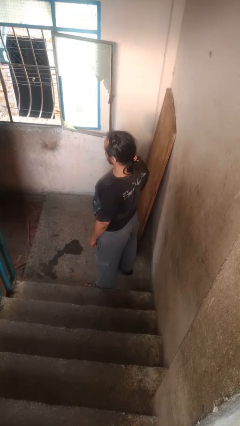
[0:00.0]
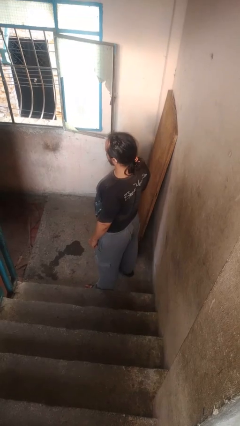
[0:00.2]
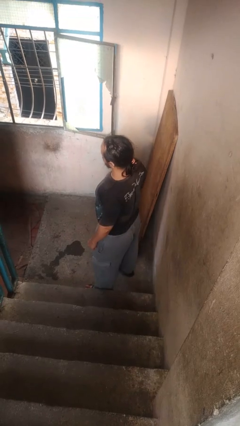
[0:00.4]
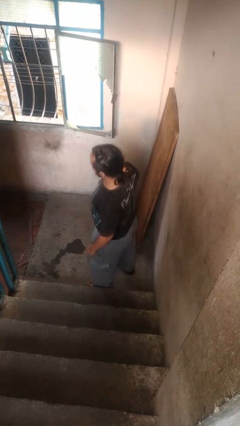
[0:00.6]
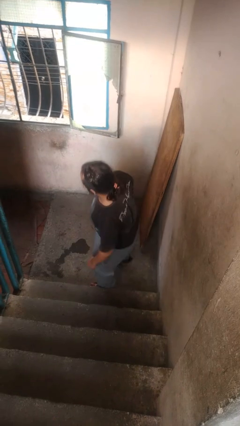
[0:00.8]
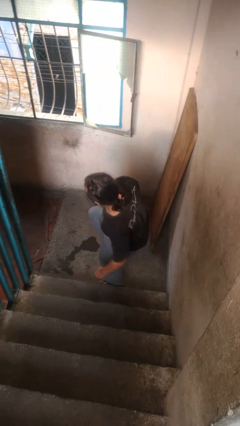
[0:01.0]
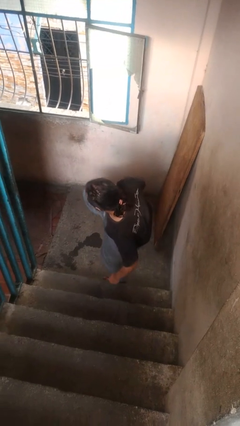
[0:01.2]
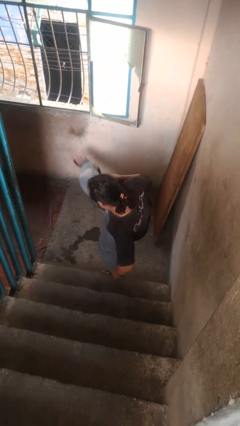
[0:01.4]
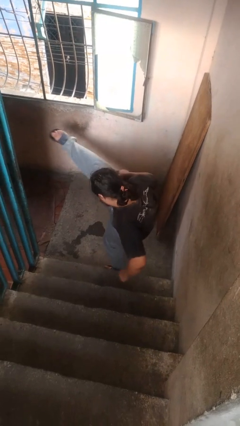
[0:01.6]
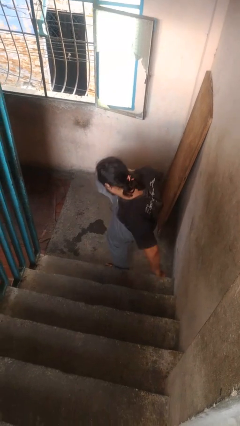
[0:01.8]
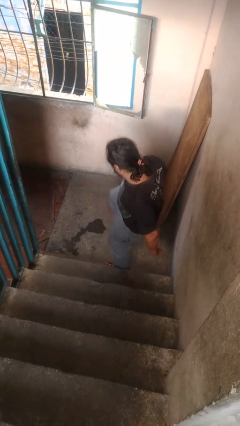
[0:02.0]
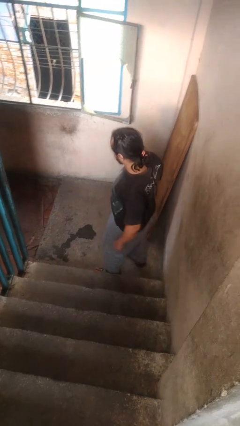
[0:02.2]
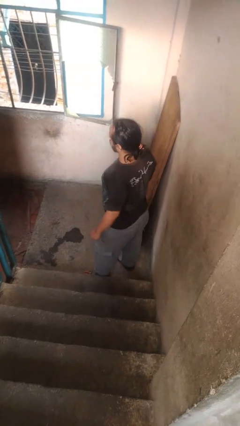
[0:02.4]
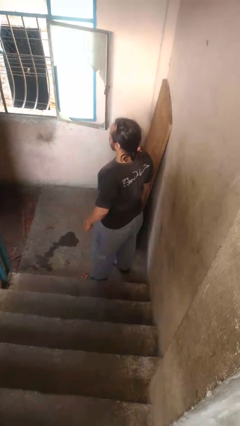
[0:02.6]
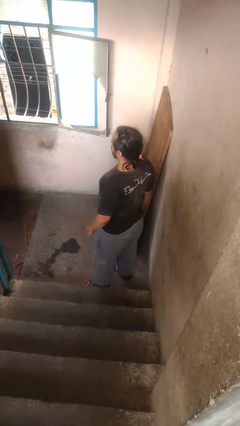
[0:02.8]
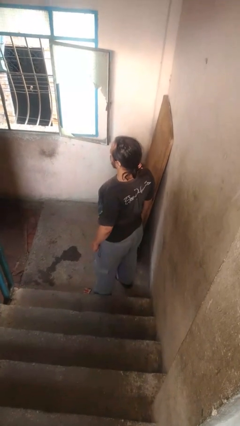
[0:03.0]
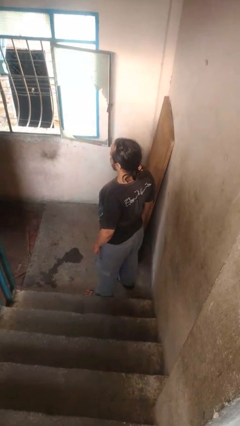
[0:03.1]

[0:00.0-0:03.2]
person karate kicks

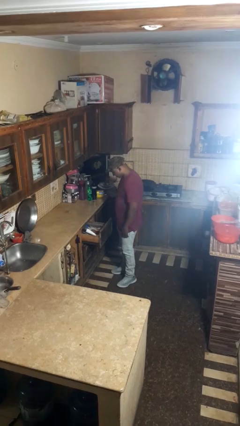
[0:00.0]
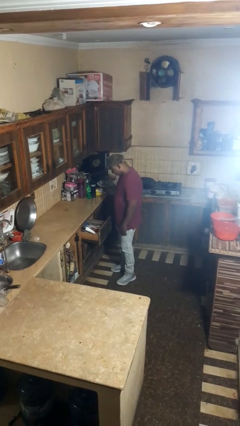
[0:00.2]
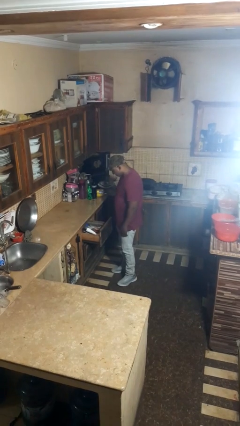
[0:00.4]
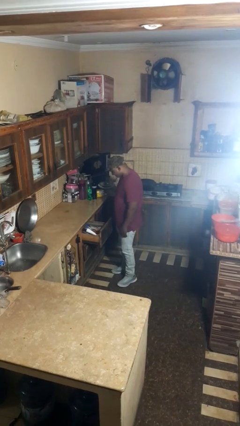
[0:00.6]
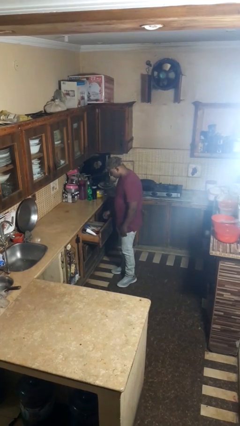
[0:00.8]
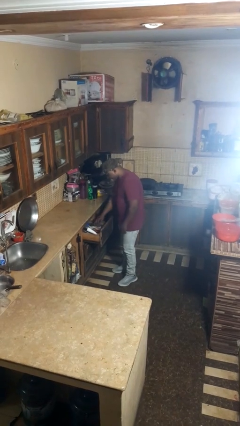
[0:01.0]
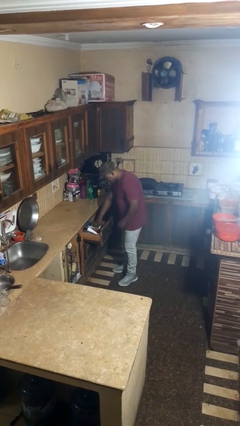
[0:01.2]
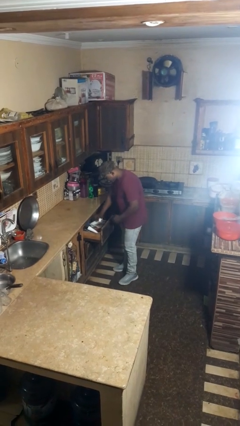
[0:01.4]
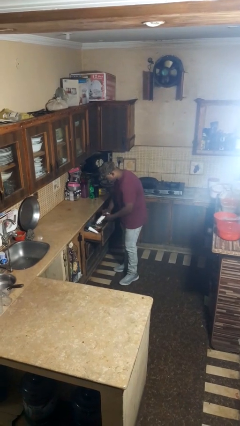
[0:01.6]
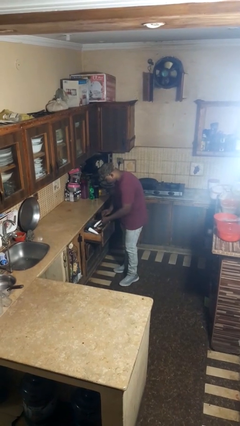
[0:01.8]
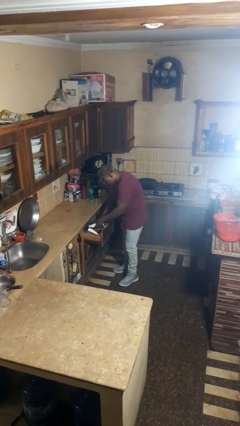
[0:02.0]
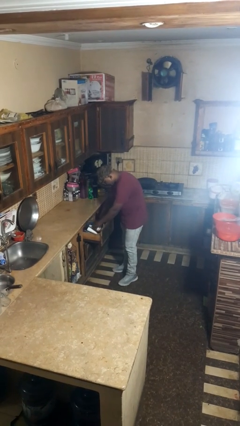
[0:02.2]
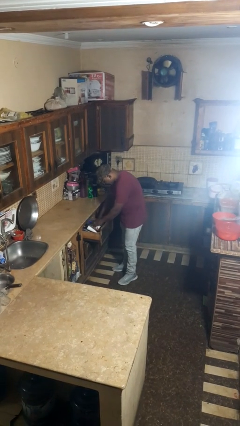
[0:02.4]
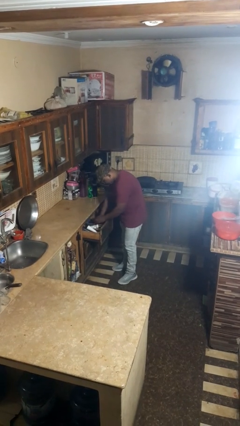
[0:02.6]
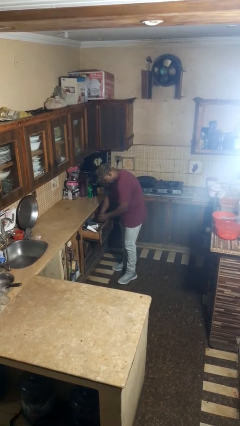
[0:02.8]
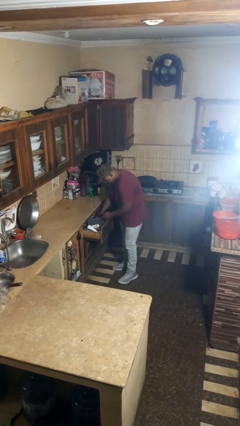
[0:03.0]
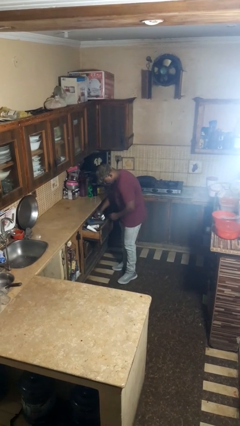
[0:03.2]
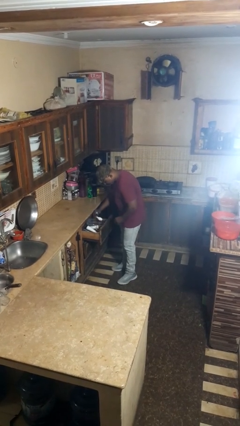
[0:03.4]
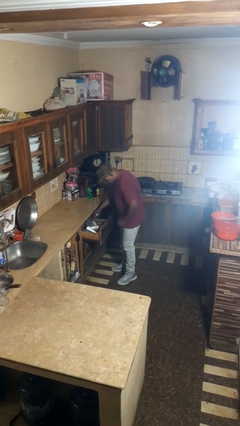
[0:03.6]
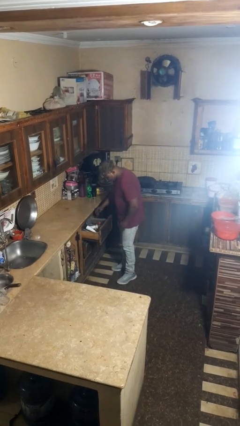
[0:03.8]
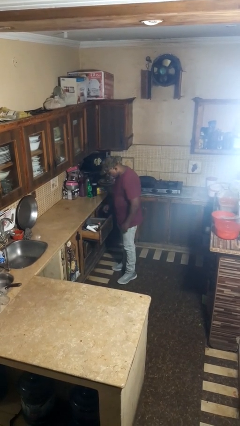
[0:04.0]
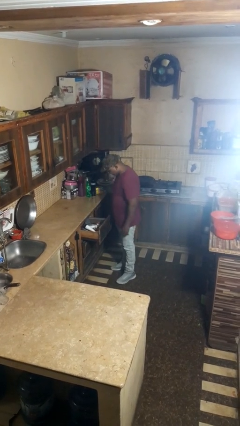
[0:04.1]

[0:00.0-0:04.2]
person searches in kitchen drawer

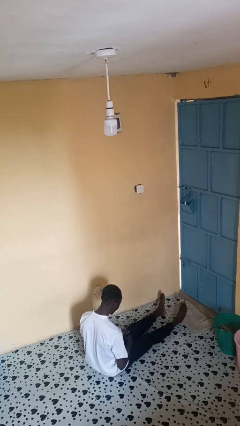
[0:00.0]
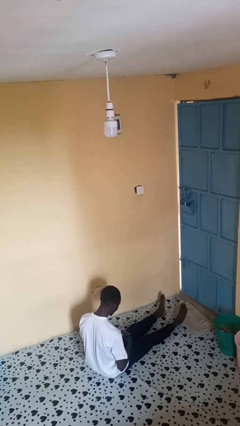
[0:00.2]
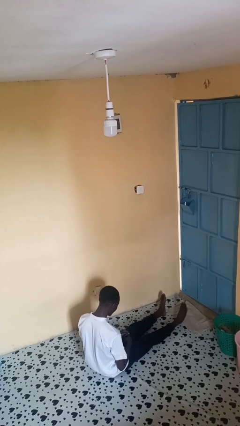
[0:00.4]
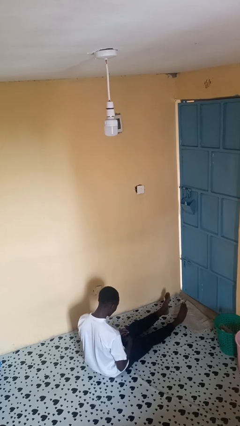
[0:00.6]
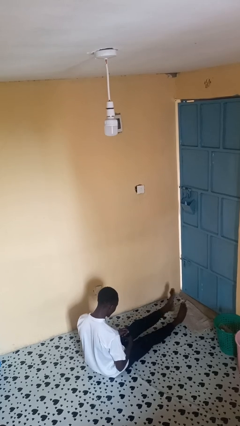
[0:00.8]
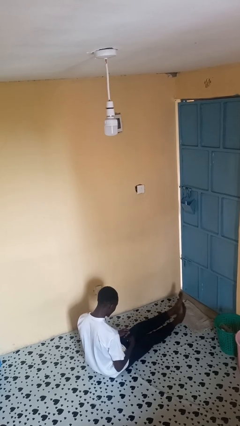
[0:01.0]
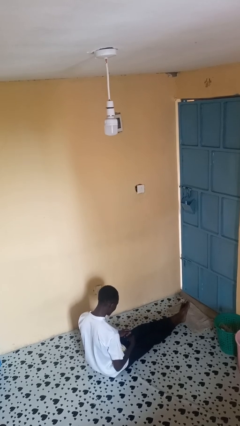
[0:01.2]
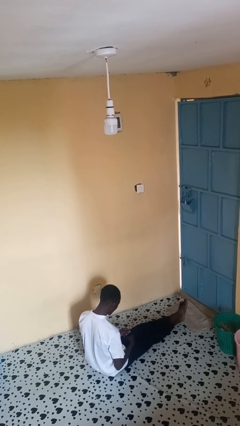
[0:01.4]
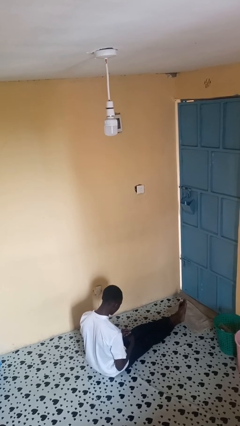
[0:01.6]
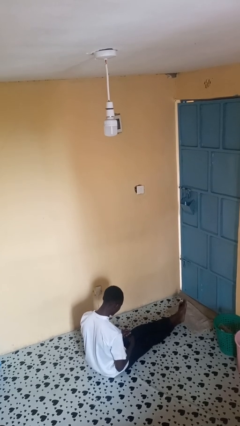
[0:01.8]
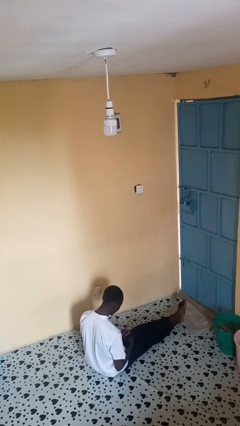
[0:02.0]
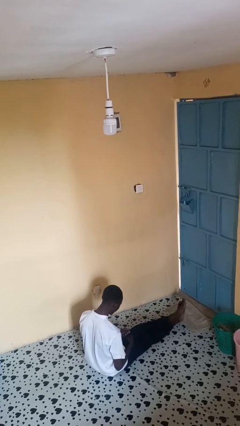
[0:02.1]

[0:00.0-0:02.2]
person crosses legs

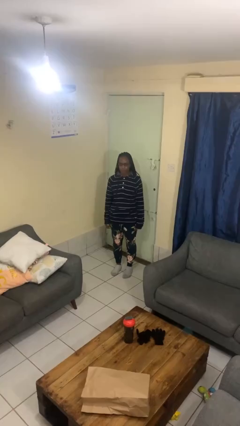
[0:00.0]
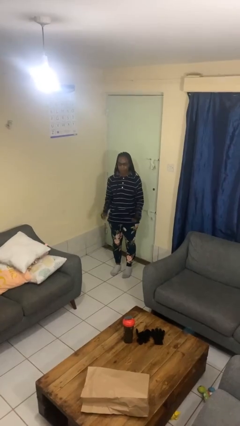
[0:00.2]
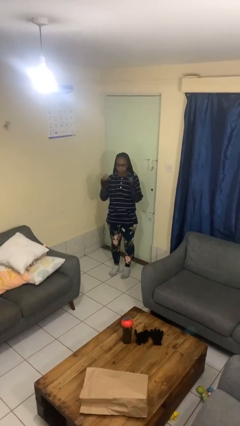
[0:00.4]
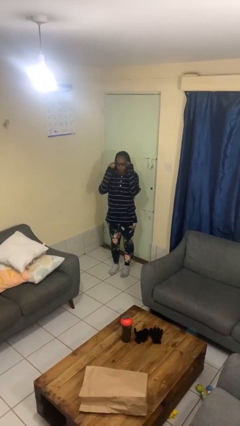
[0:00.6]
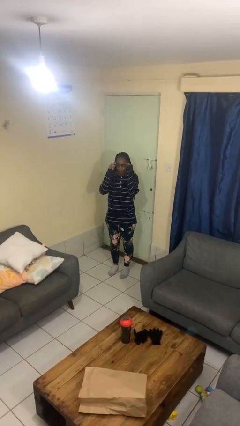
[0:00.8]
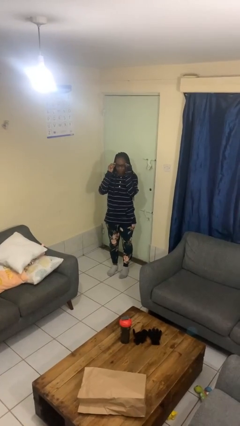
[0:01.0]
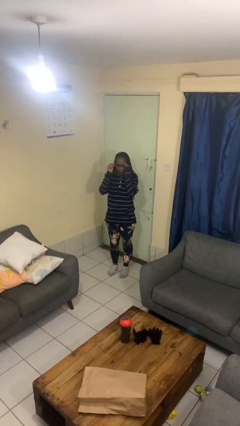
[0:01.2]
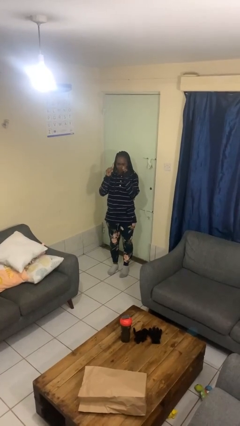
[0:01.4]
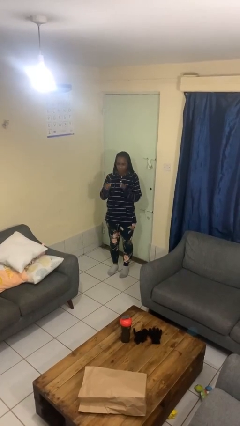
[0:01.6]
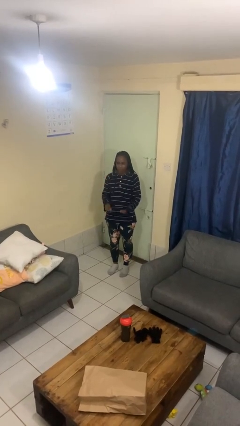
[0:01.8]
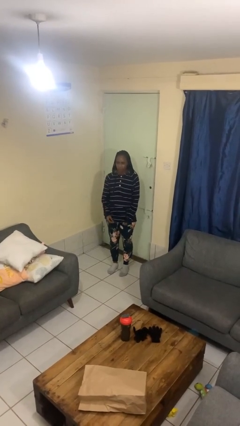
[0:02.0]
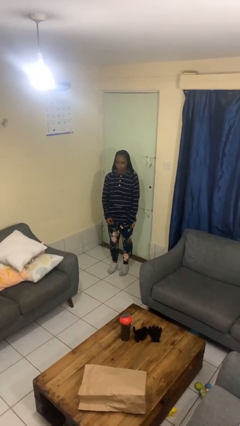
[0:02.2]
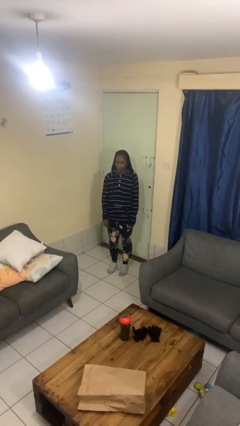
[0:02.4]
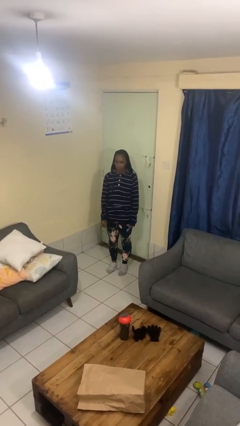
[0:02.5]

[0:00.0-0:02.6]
person takes off glasses

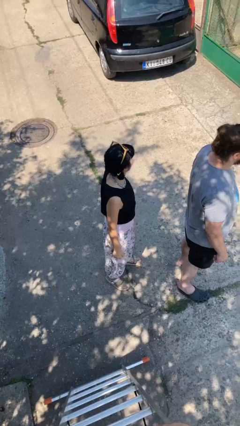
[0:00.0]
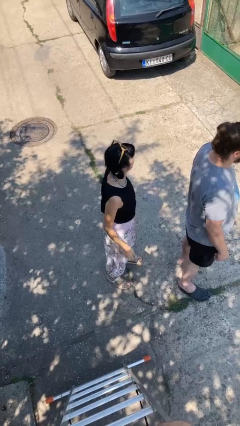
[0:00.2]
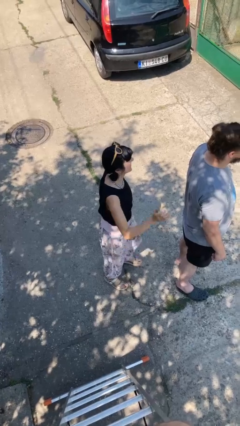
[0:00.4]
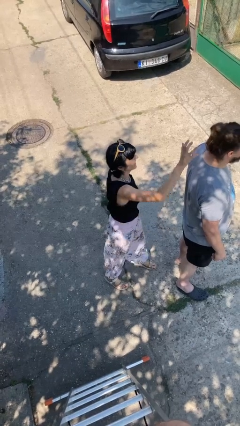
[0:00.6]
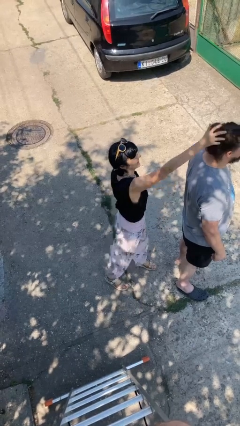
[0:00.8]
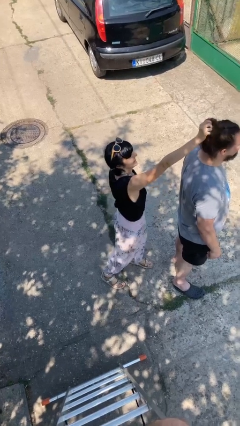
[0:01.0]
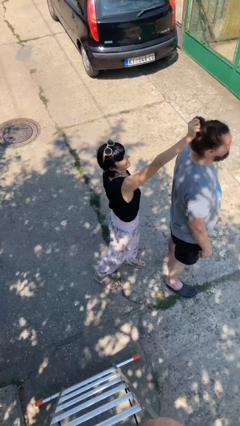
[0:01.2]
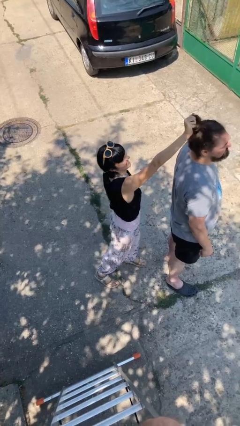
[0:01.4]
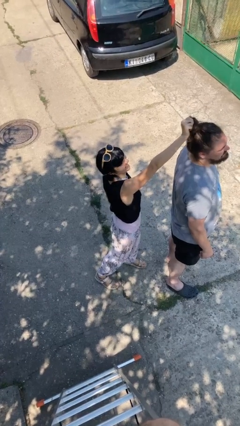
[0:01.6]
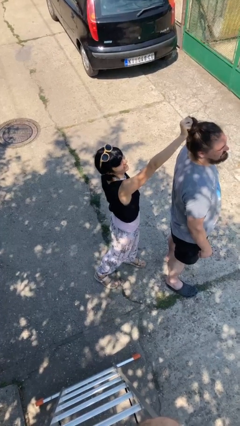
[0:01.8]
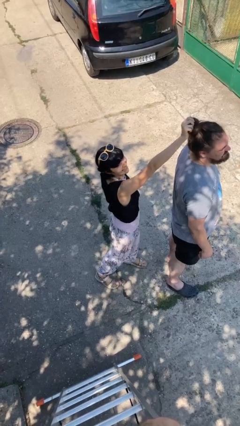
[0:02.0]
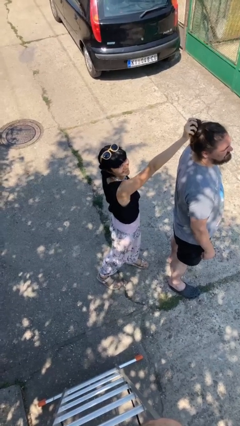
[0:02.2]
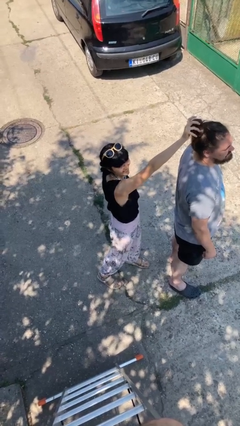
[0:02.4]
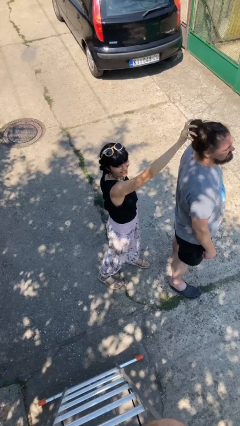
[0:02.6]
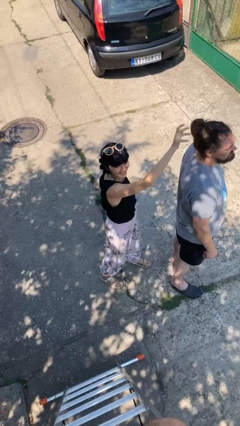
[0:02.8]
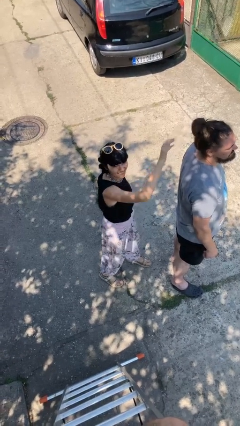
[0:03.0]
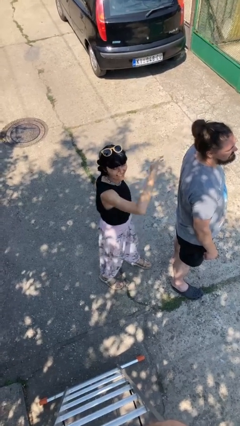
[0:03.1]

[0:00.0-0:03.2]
person grabs person by hair

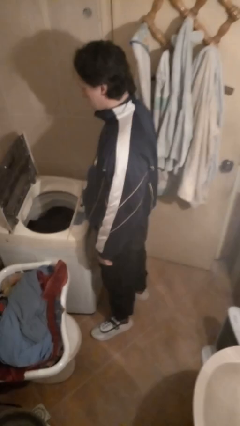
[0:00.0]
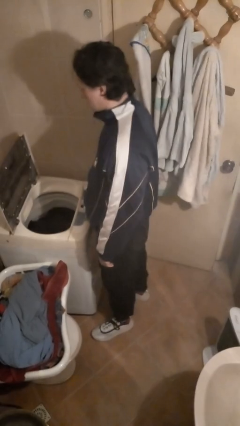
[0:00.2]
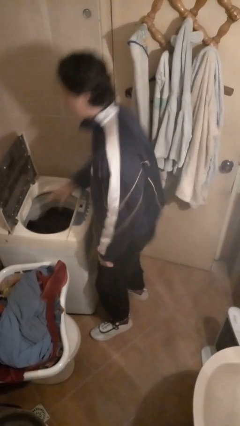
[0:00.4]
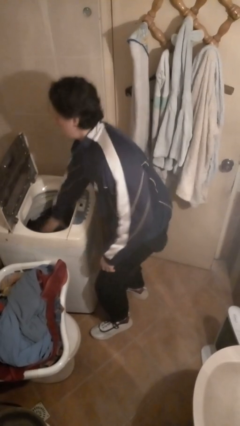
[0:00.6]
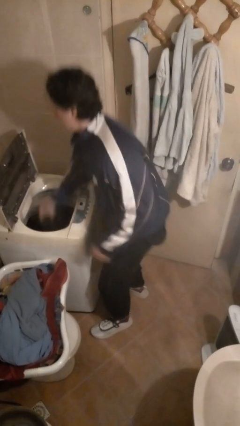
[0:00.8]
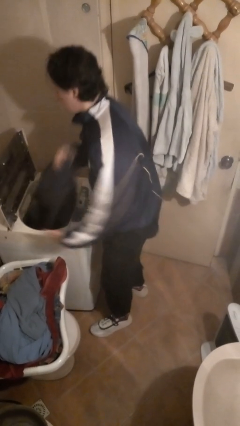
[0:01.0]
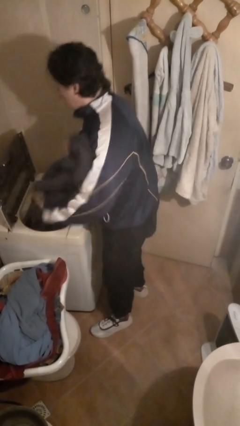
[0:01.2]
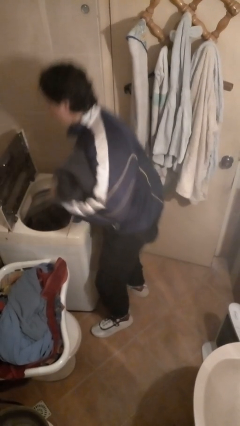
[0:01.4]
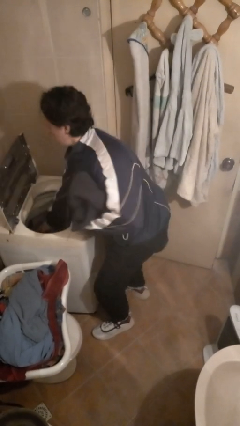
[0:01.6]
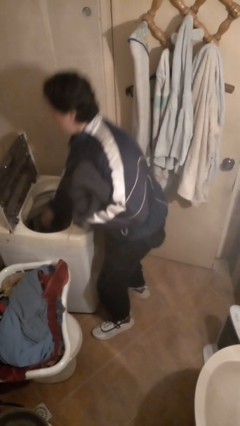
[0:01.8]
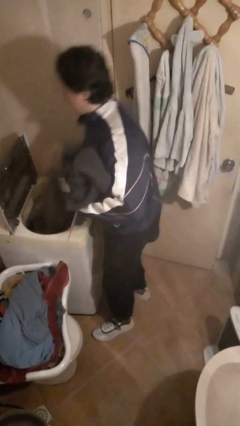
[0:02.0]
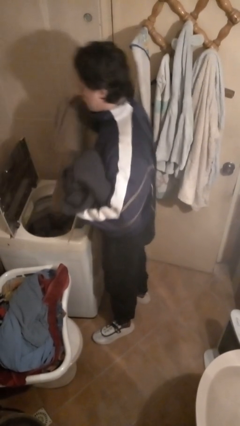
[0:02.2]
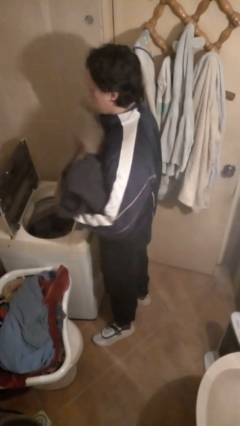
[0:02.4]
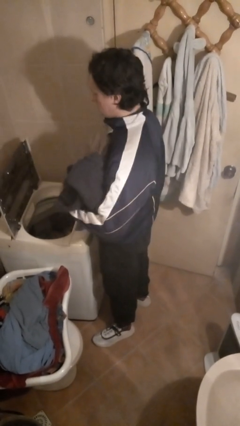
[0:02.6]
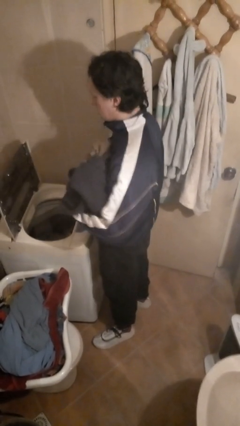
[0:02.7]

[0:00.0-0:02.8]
person loads clotheswasher
